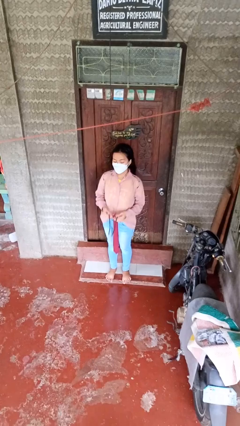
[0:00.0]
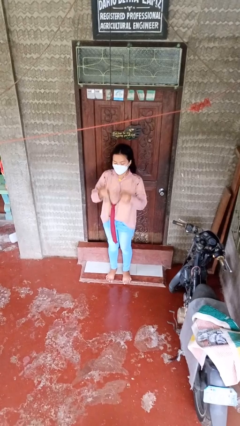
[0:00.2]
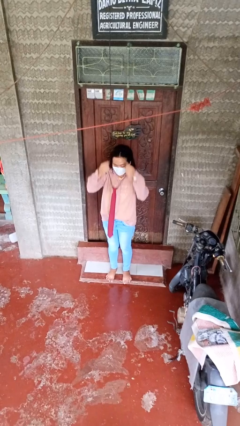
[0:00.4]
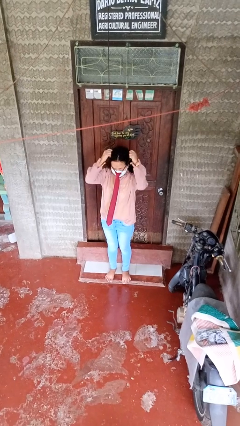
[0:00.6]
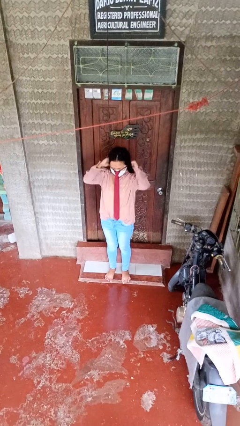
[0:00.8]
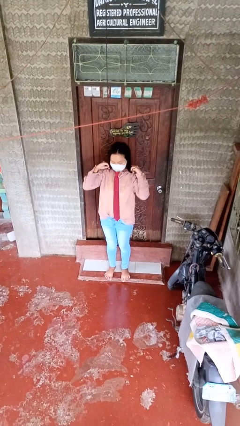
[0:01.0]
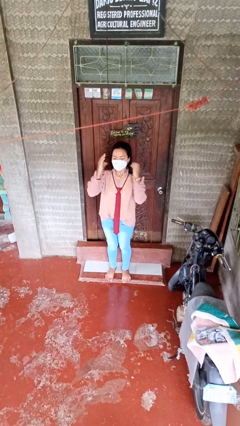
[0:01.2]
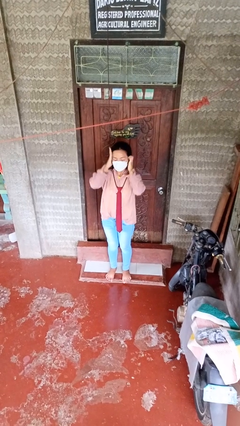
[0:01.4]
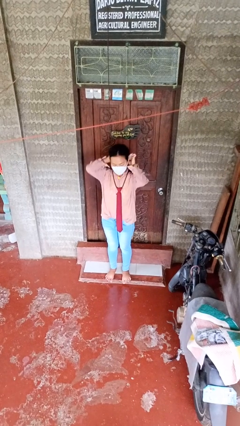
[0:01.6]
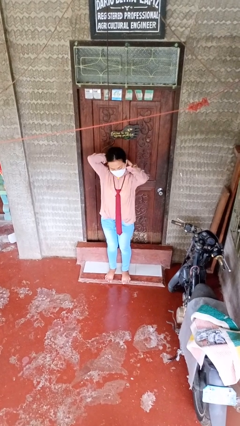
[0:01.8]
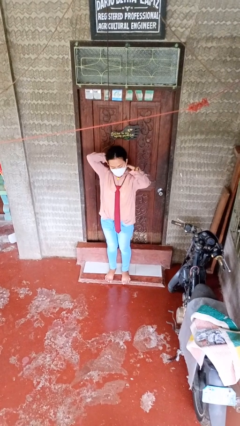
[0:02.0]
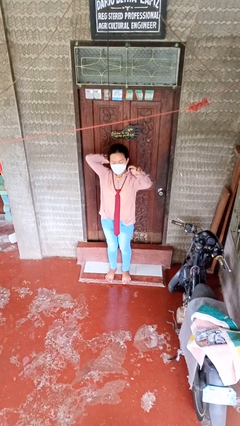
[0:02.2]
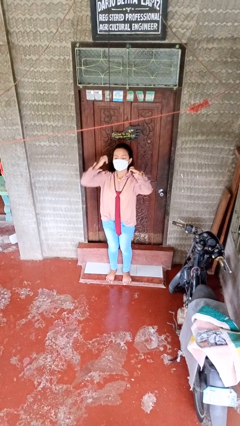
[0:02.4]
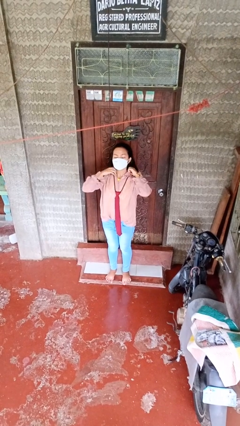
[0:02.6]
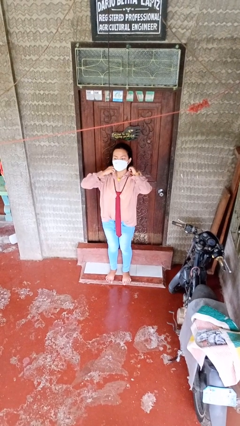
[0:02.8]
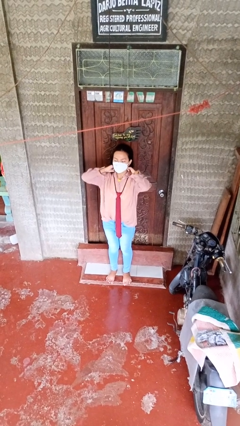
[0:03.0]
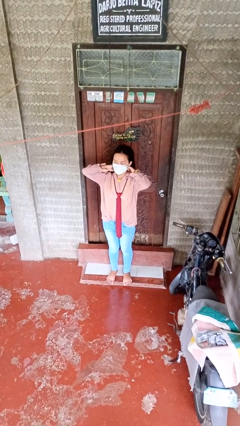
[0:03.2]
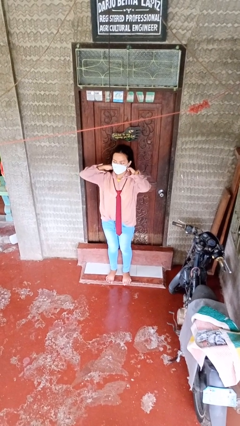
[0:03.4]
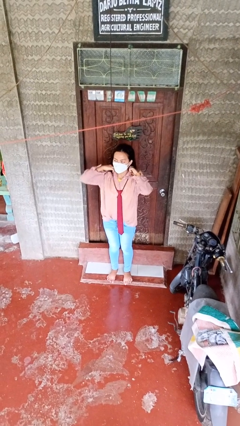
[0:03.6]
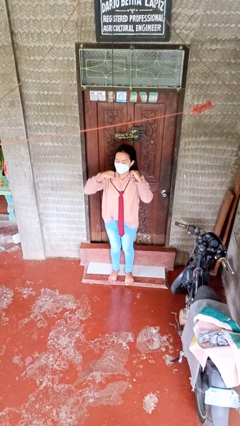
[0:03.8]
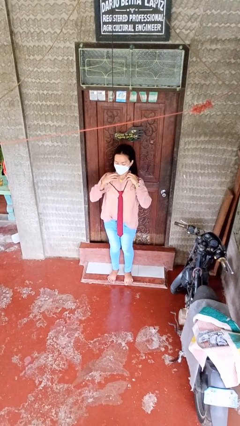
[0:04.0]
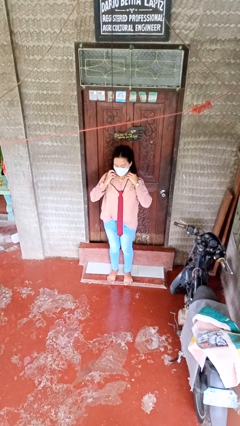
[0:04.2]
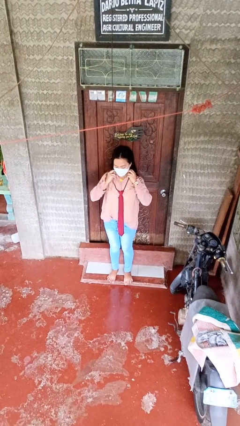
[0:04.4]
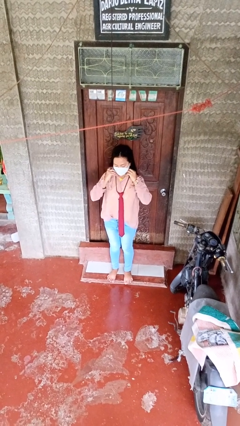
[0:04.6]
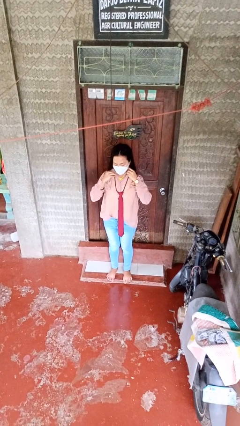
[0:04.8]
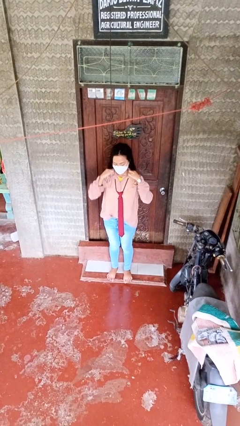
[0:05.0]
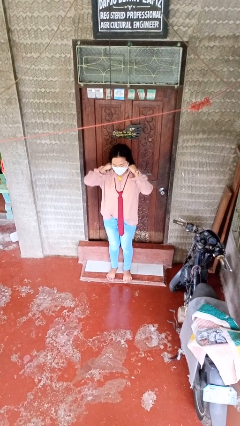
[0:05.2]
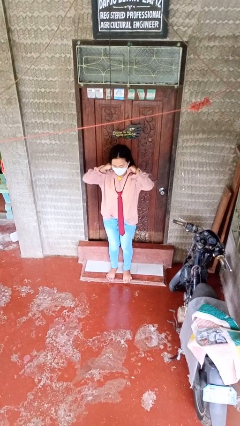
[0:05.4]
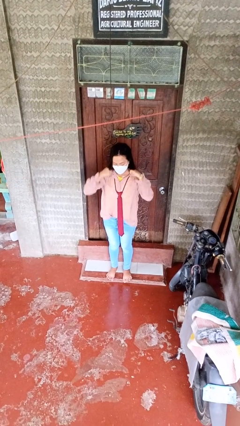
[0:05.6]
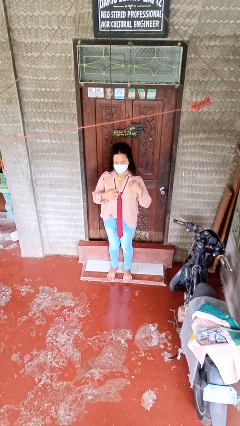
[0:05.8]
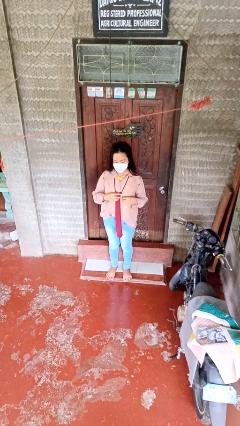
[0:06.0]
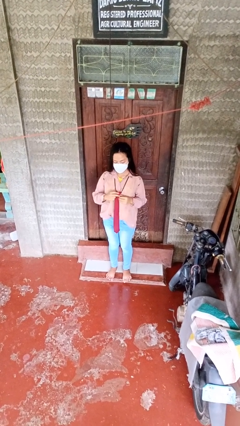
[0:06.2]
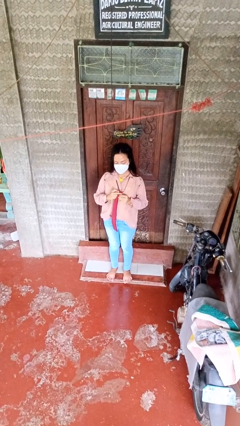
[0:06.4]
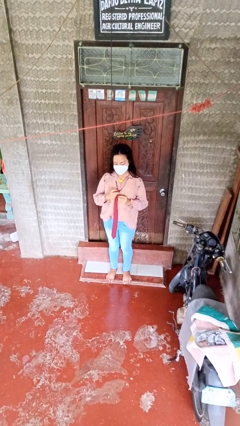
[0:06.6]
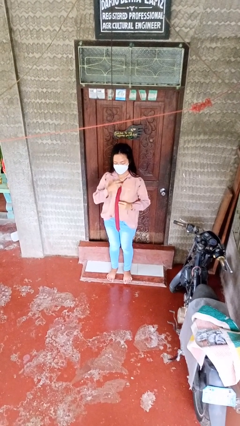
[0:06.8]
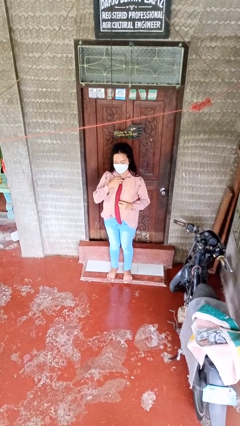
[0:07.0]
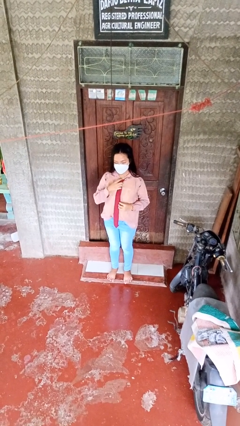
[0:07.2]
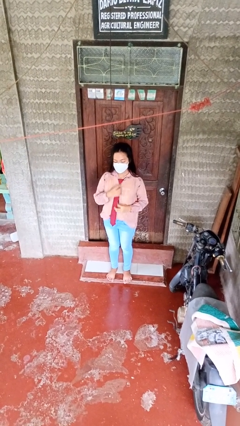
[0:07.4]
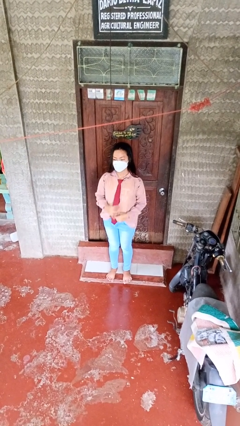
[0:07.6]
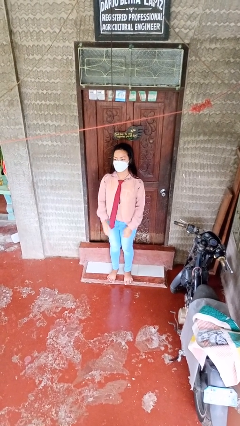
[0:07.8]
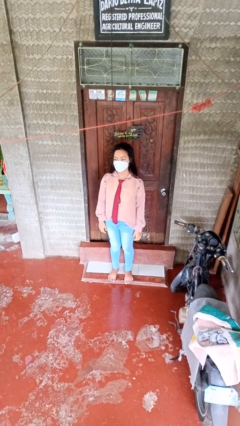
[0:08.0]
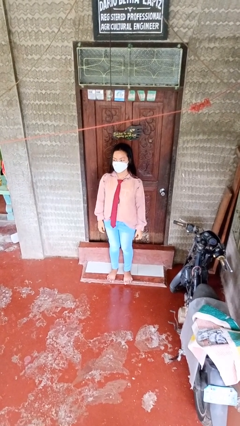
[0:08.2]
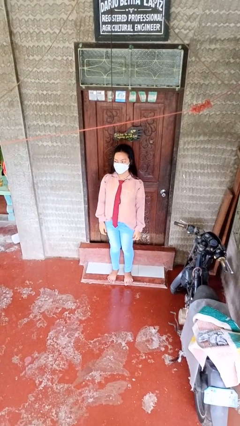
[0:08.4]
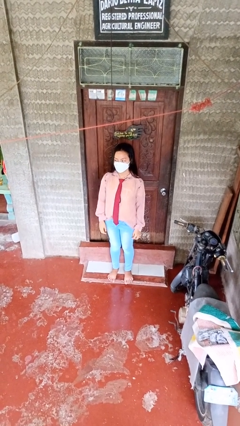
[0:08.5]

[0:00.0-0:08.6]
person puts on necktie

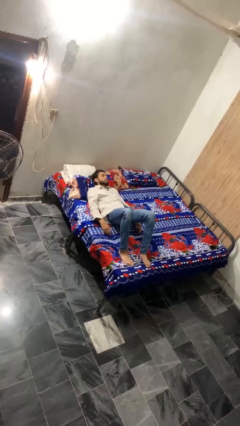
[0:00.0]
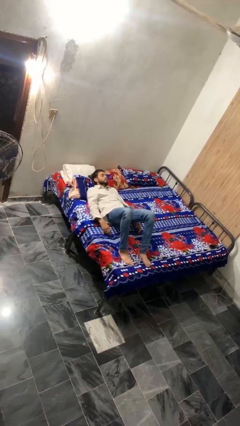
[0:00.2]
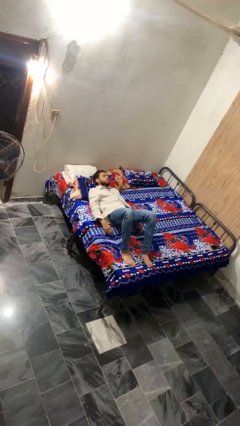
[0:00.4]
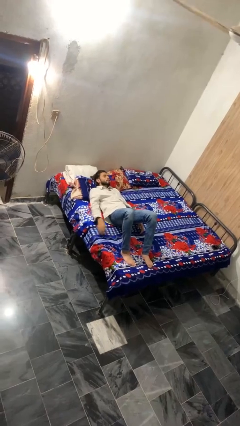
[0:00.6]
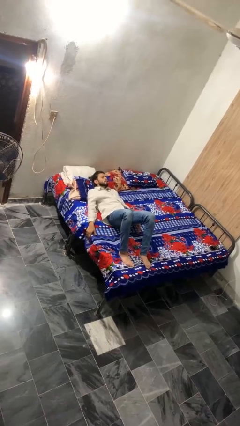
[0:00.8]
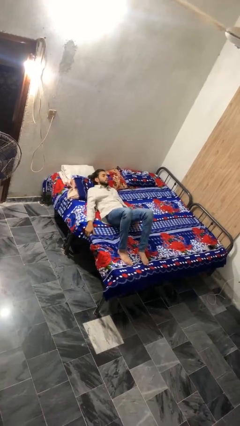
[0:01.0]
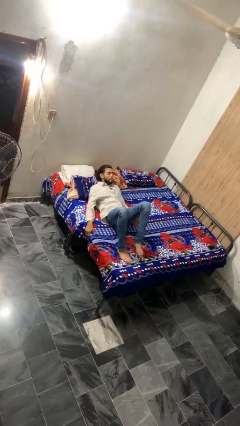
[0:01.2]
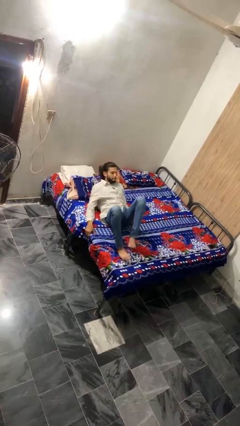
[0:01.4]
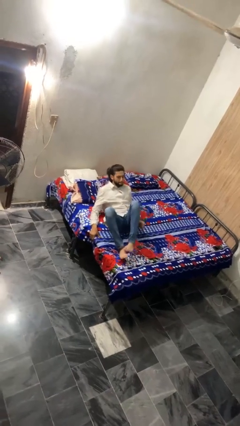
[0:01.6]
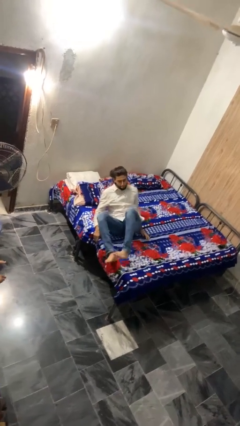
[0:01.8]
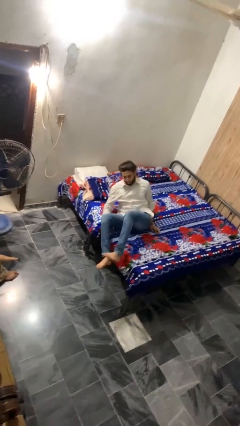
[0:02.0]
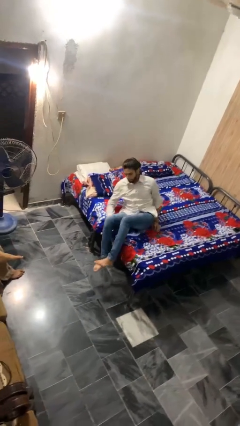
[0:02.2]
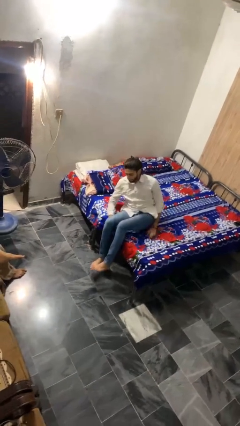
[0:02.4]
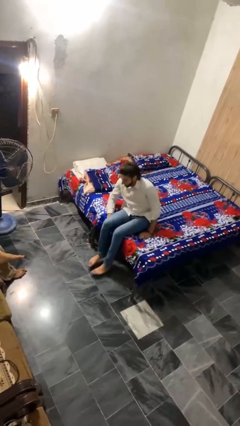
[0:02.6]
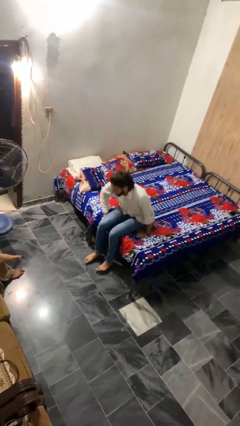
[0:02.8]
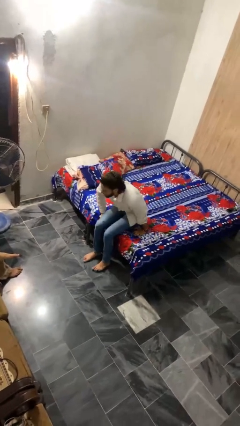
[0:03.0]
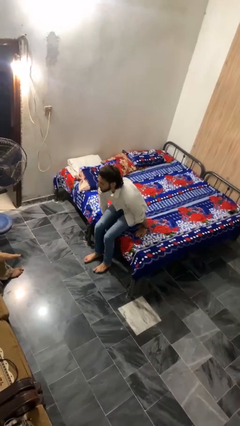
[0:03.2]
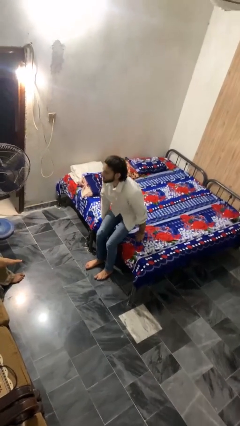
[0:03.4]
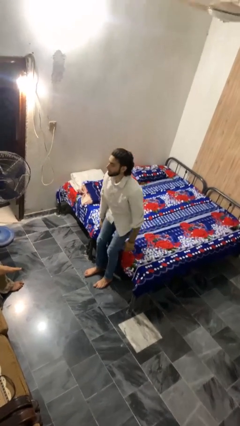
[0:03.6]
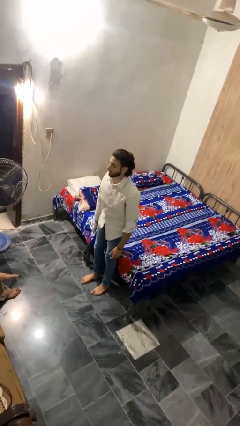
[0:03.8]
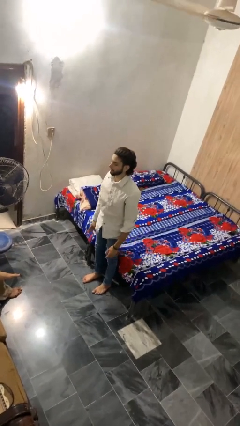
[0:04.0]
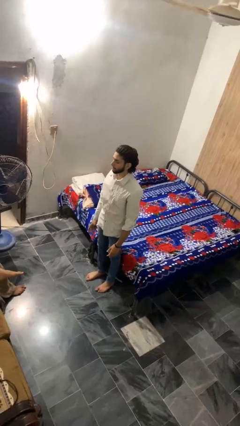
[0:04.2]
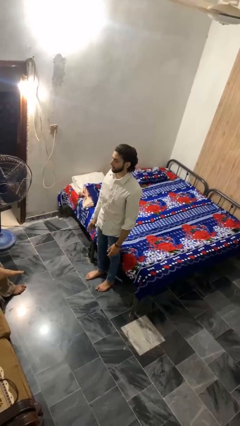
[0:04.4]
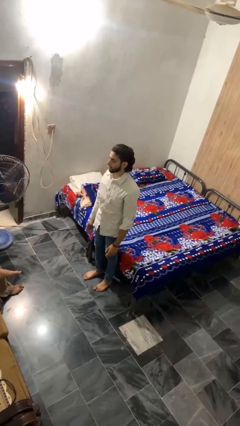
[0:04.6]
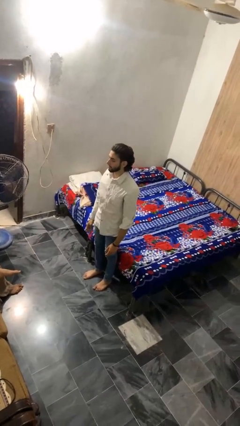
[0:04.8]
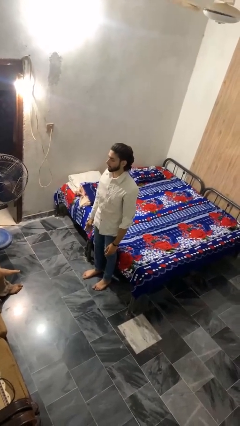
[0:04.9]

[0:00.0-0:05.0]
person stands up

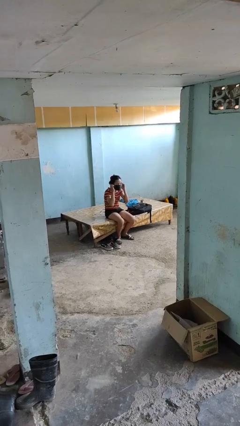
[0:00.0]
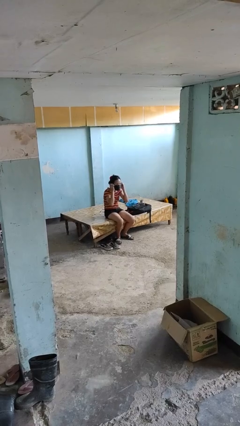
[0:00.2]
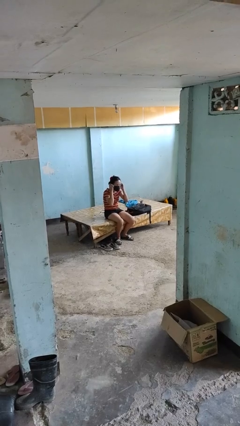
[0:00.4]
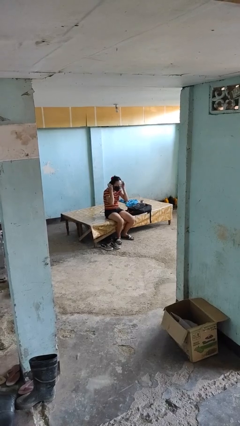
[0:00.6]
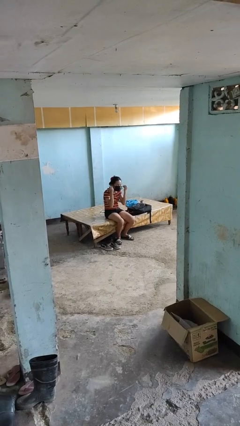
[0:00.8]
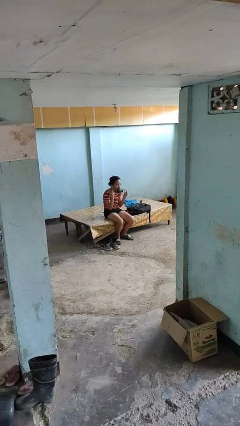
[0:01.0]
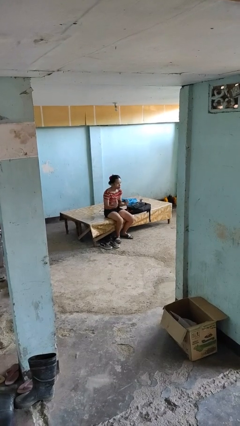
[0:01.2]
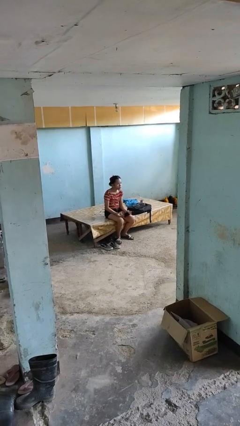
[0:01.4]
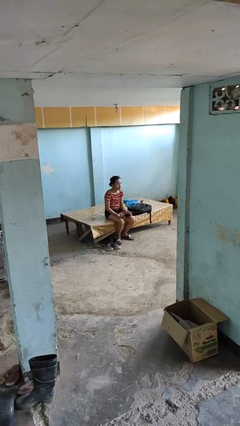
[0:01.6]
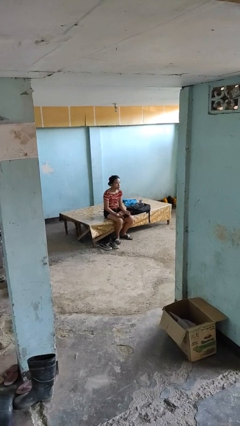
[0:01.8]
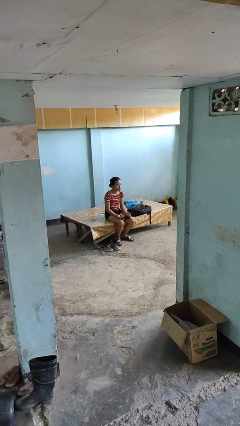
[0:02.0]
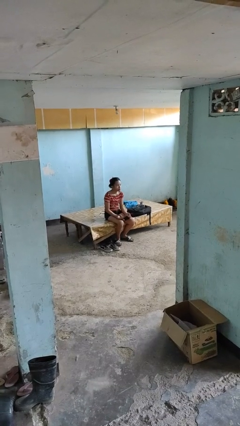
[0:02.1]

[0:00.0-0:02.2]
person takes off facemask

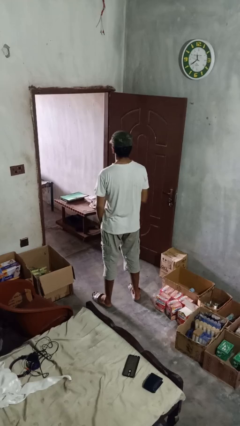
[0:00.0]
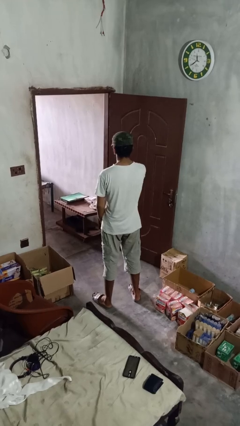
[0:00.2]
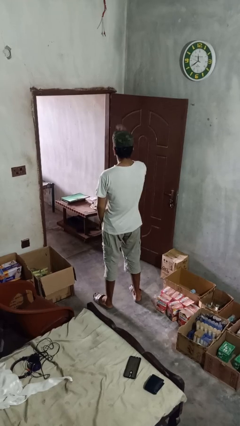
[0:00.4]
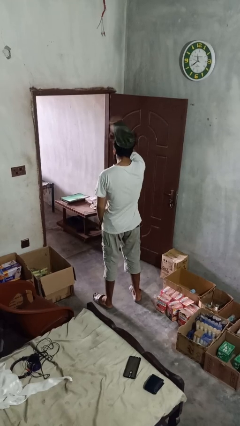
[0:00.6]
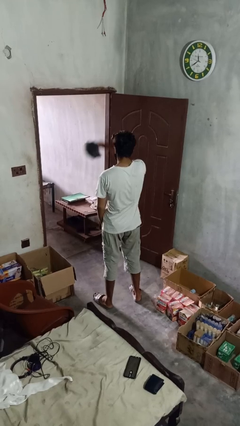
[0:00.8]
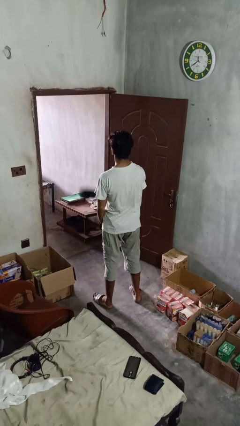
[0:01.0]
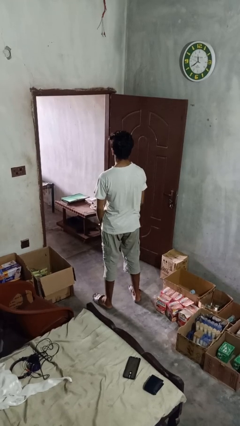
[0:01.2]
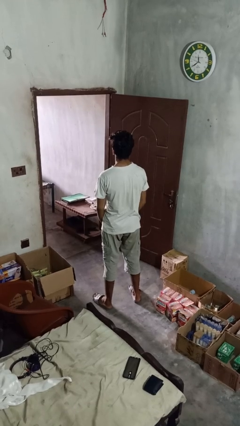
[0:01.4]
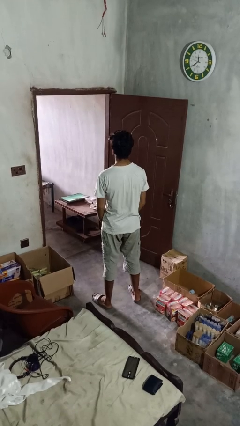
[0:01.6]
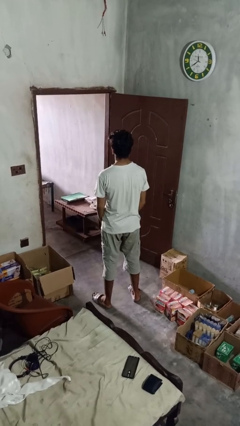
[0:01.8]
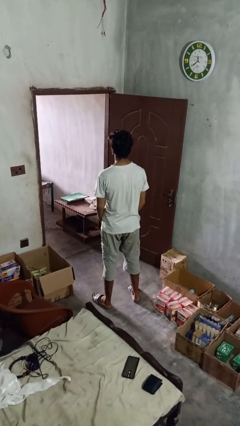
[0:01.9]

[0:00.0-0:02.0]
person takes off hat

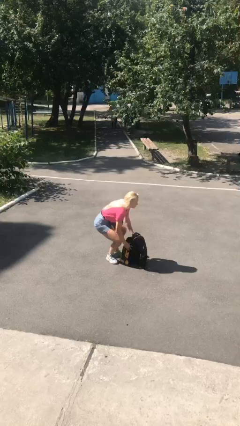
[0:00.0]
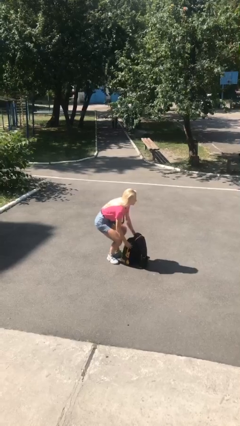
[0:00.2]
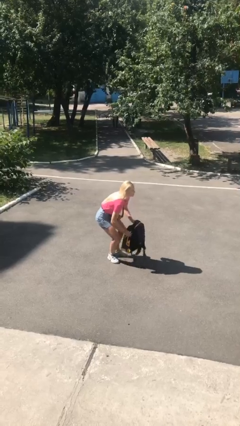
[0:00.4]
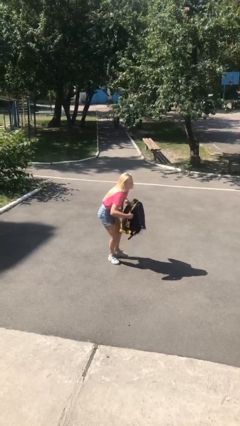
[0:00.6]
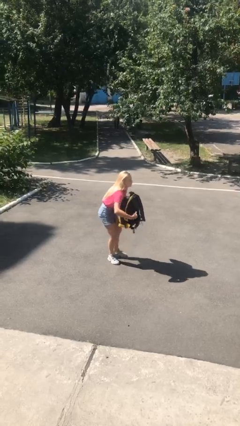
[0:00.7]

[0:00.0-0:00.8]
person picks up object from floor
